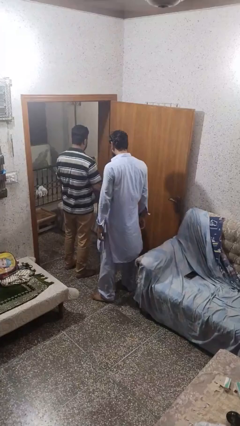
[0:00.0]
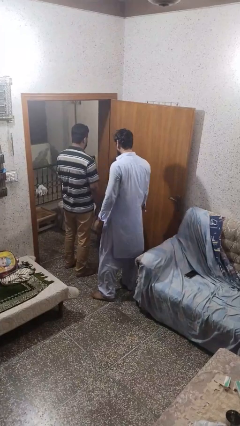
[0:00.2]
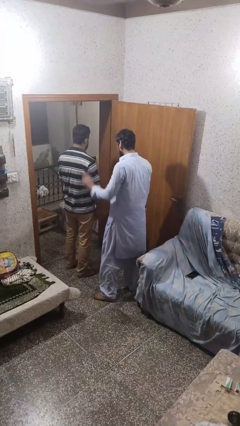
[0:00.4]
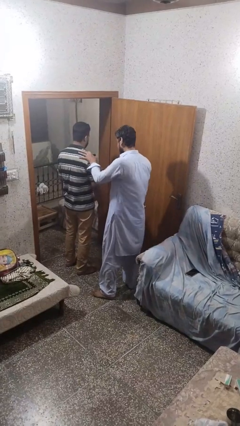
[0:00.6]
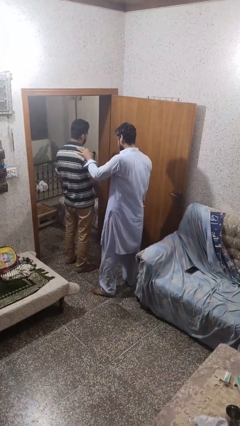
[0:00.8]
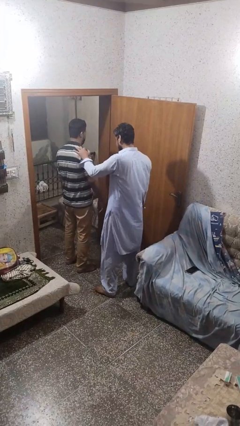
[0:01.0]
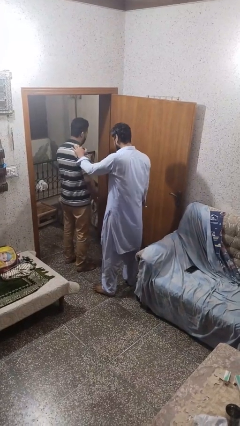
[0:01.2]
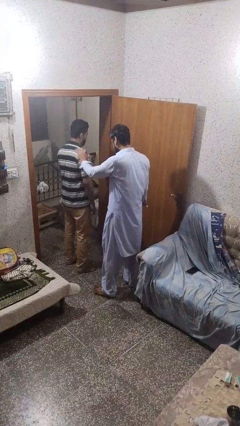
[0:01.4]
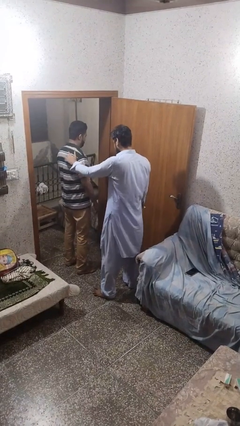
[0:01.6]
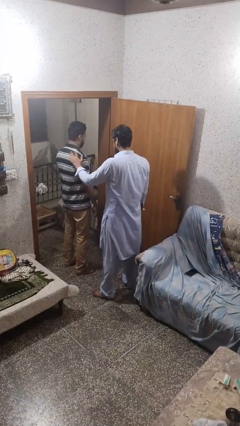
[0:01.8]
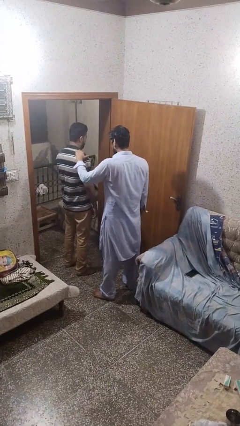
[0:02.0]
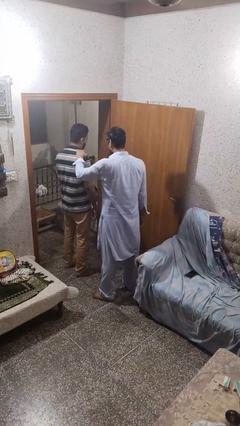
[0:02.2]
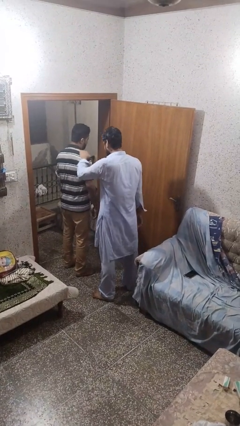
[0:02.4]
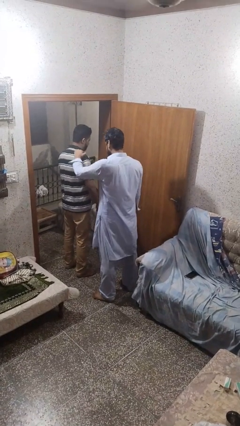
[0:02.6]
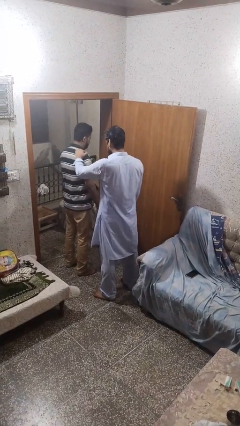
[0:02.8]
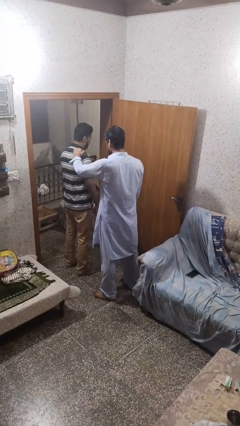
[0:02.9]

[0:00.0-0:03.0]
person grabs person by shoulder

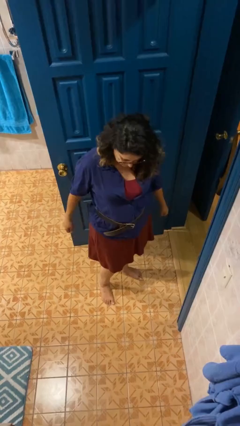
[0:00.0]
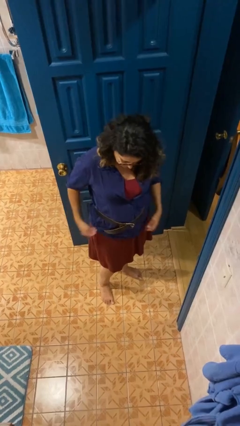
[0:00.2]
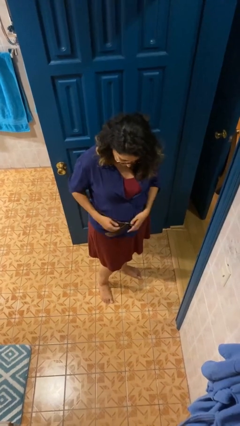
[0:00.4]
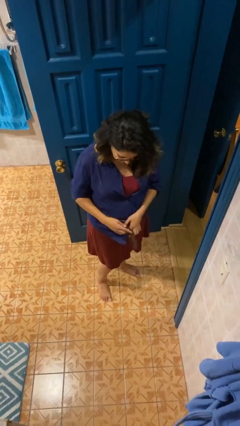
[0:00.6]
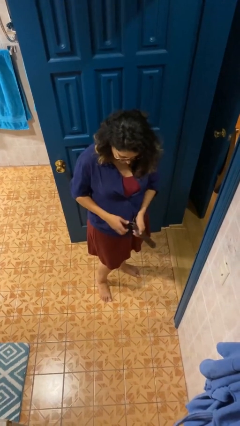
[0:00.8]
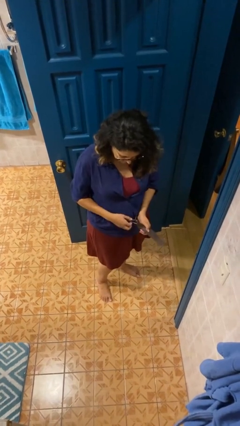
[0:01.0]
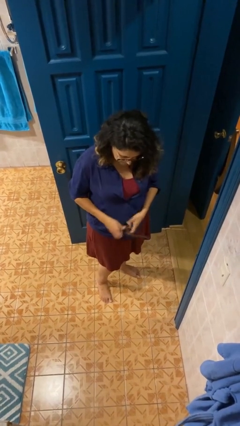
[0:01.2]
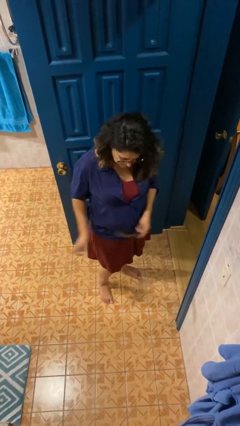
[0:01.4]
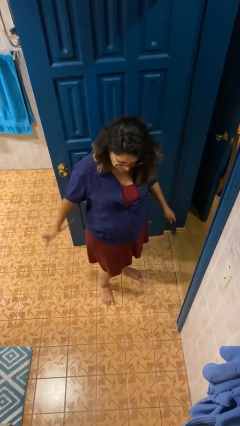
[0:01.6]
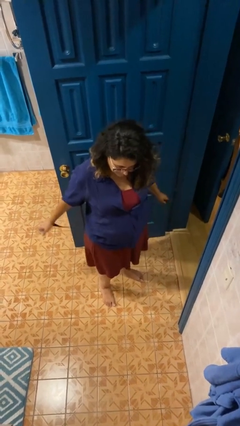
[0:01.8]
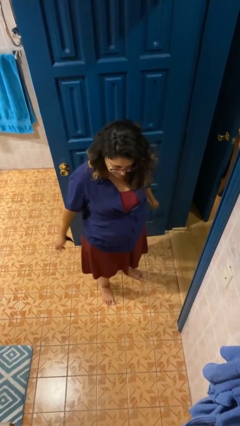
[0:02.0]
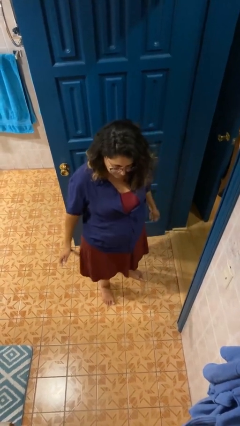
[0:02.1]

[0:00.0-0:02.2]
person takes off belt

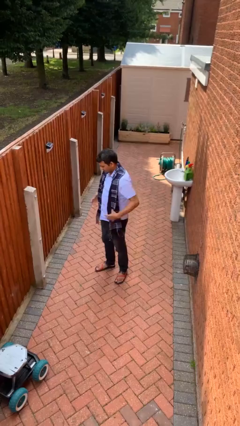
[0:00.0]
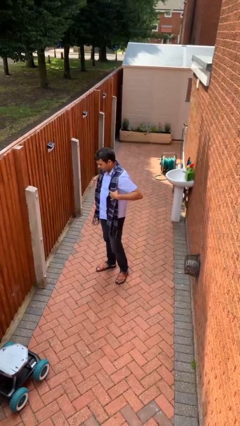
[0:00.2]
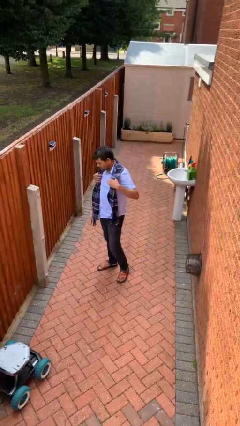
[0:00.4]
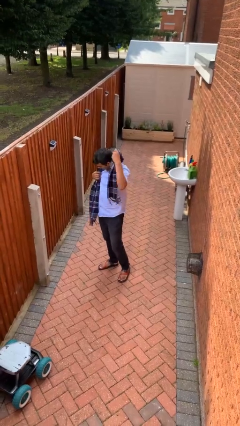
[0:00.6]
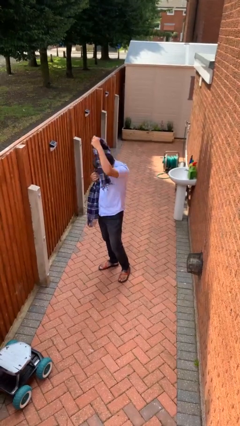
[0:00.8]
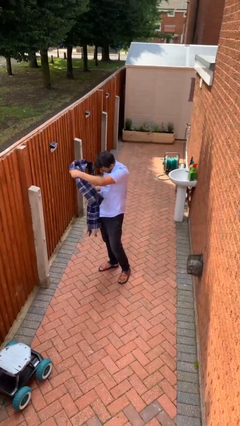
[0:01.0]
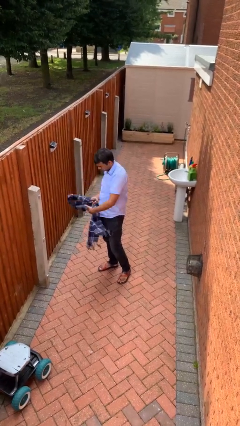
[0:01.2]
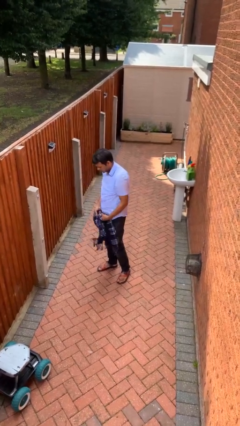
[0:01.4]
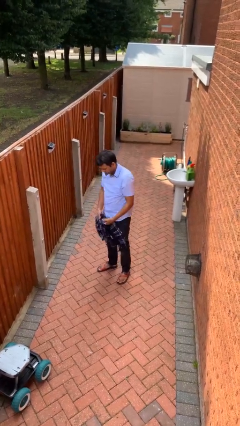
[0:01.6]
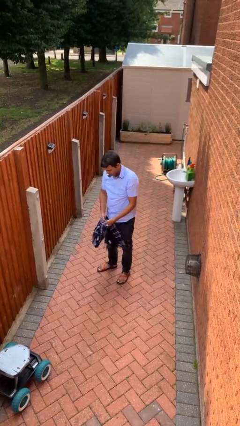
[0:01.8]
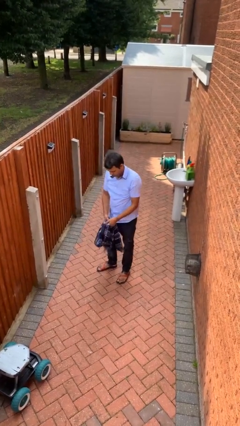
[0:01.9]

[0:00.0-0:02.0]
person takes off scarf

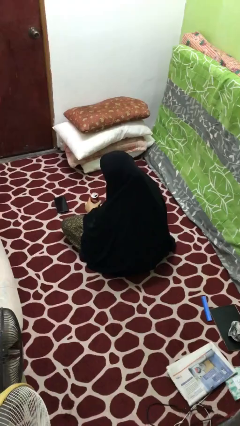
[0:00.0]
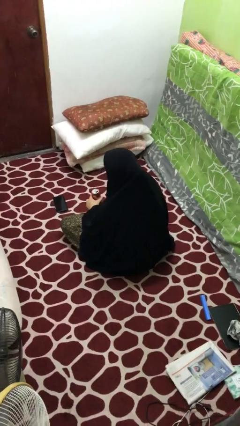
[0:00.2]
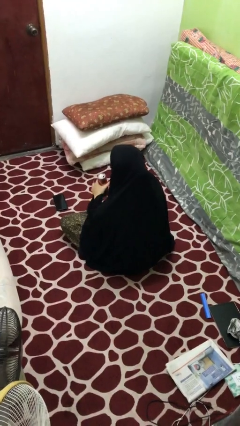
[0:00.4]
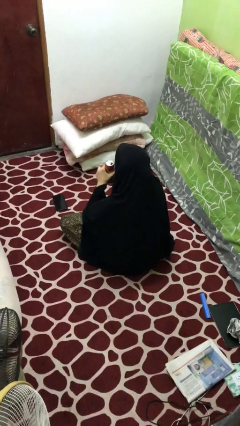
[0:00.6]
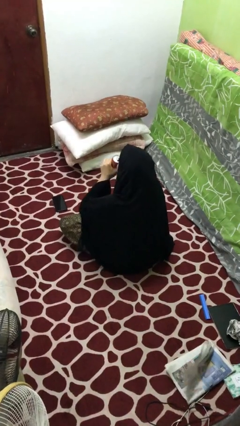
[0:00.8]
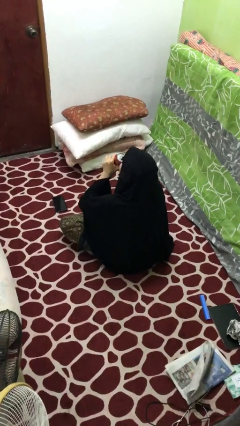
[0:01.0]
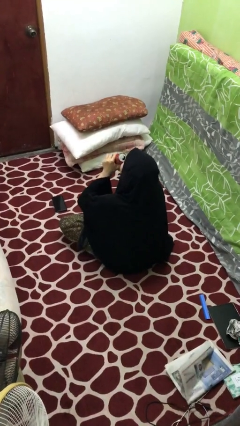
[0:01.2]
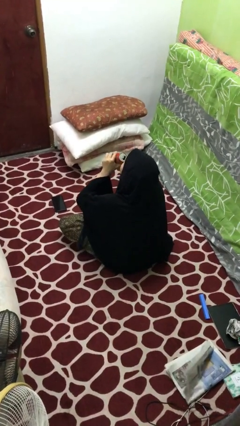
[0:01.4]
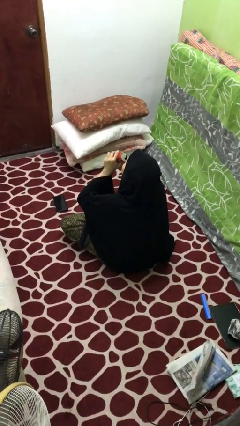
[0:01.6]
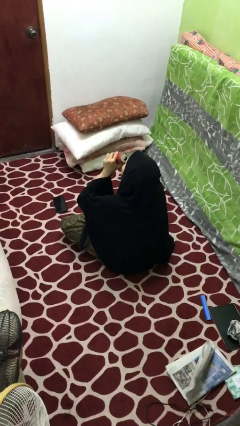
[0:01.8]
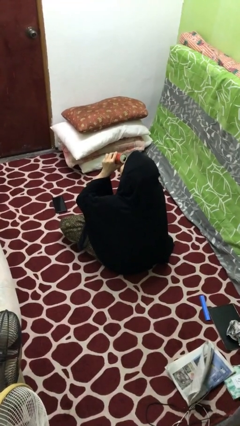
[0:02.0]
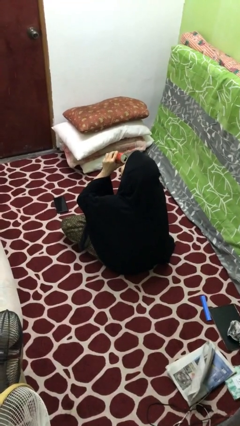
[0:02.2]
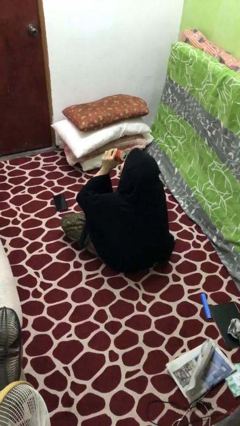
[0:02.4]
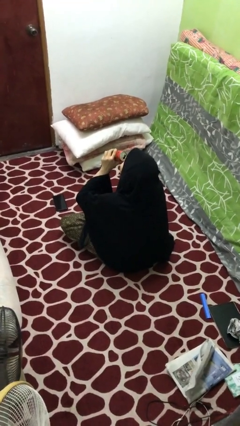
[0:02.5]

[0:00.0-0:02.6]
person drinks from beverage can

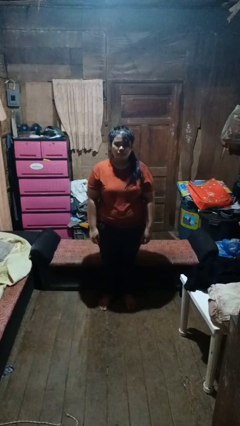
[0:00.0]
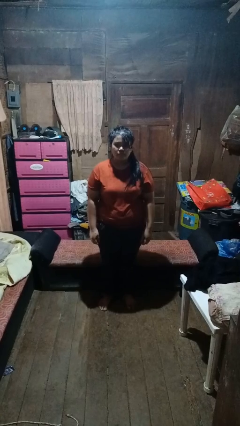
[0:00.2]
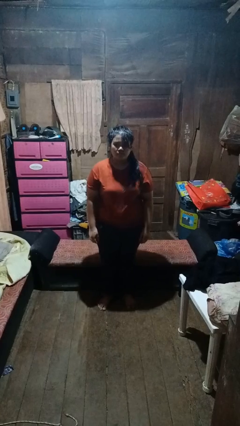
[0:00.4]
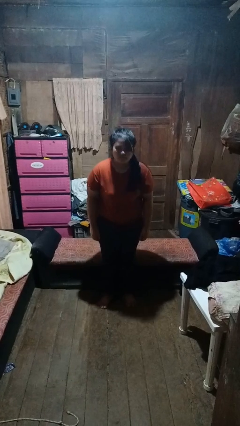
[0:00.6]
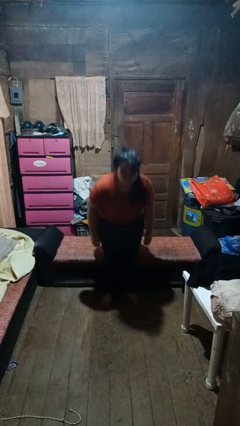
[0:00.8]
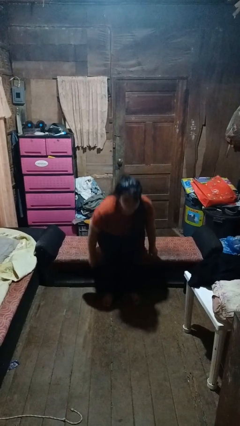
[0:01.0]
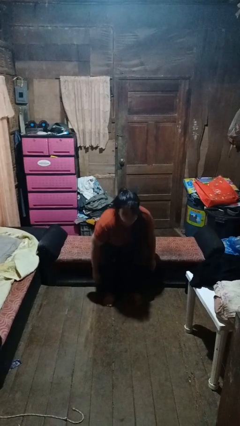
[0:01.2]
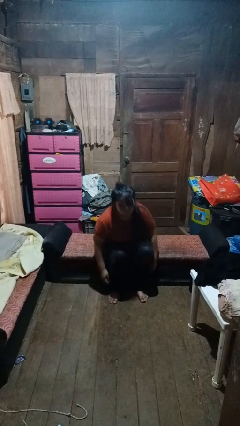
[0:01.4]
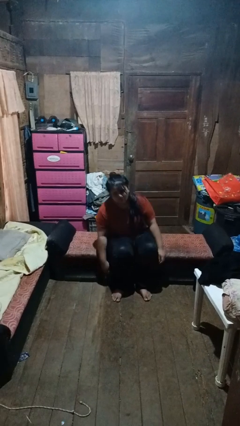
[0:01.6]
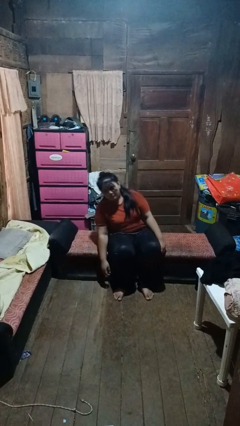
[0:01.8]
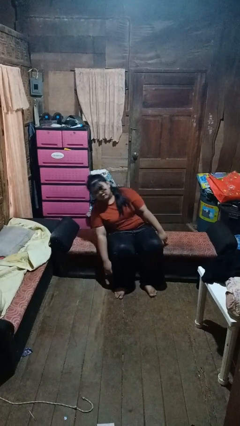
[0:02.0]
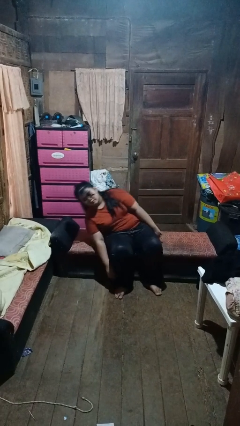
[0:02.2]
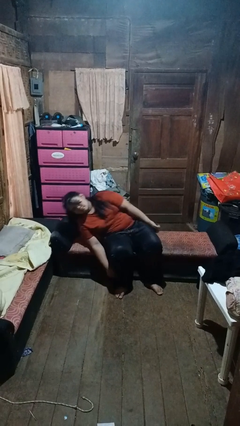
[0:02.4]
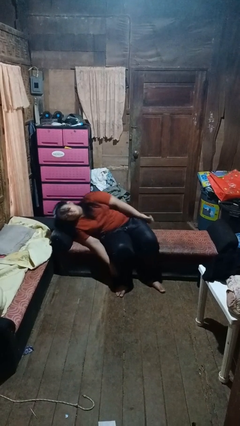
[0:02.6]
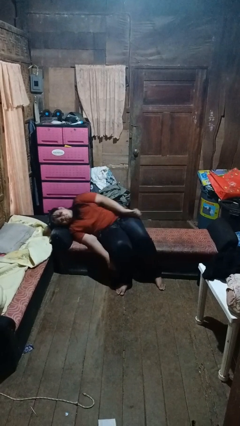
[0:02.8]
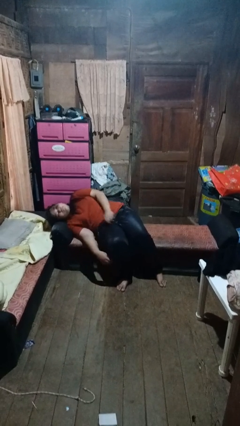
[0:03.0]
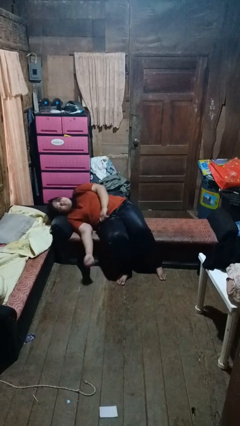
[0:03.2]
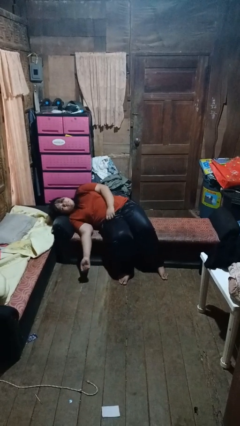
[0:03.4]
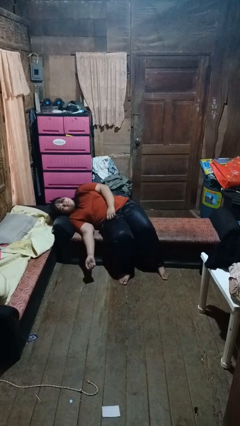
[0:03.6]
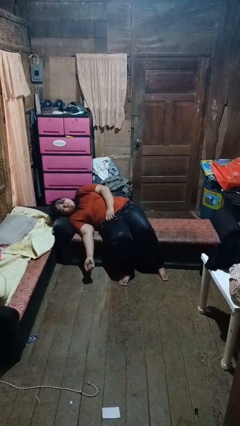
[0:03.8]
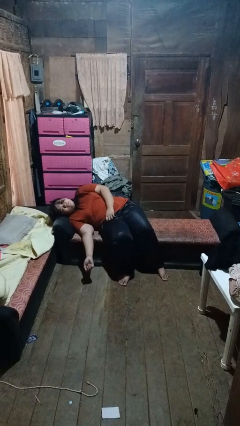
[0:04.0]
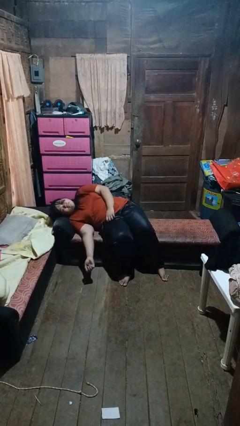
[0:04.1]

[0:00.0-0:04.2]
person lies down on couch

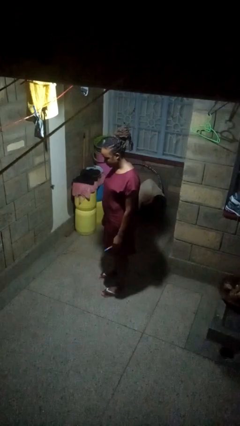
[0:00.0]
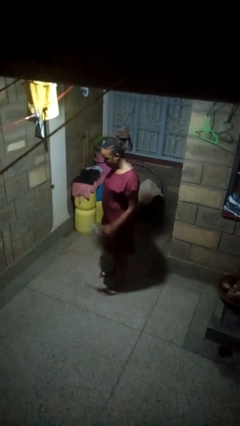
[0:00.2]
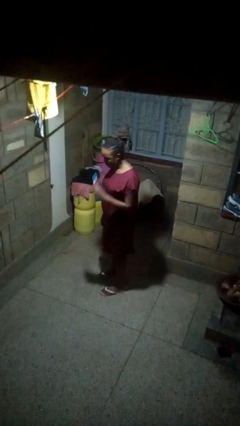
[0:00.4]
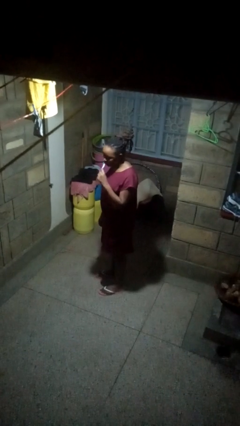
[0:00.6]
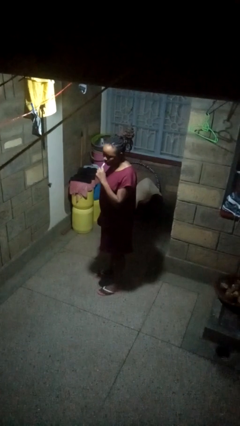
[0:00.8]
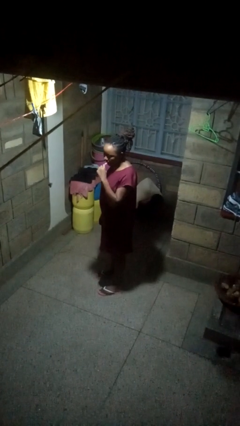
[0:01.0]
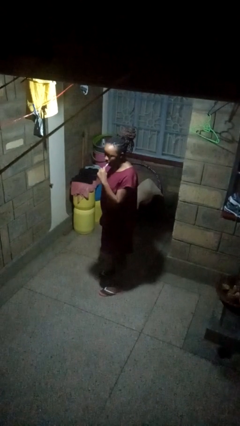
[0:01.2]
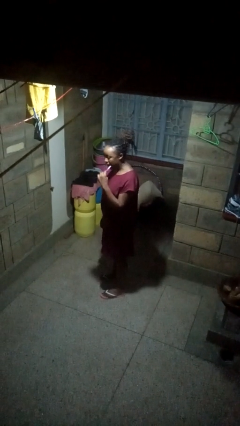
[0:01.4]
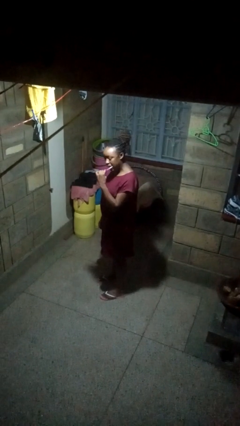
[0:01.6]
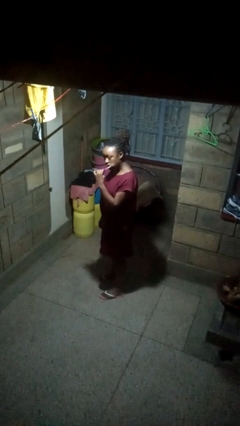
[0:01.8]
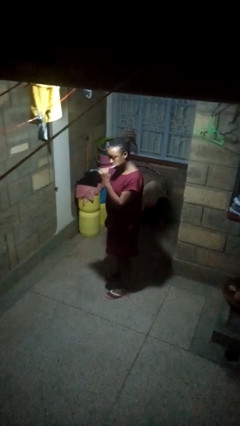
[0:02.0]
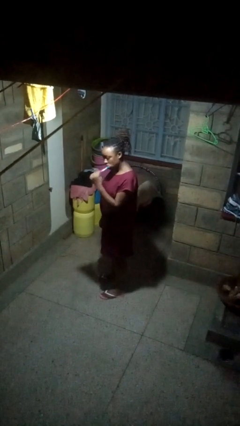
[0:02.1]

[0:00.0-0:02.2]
person brushes teeth

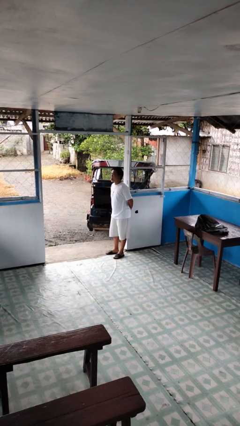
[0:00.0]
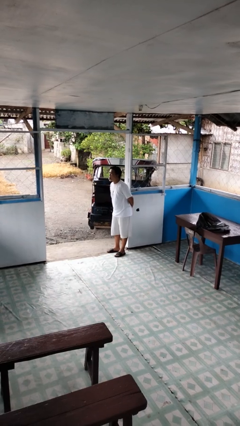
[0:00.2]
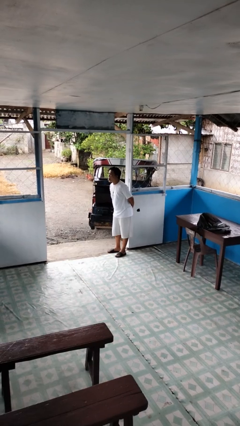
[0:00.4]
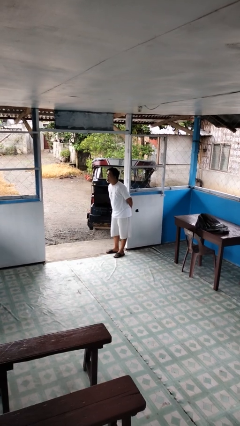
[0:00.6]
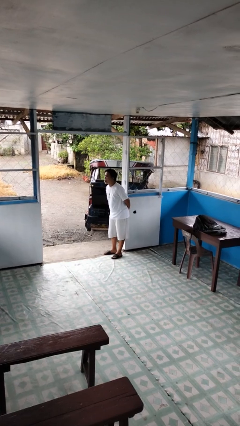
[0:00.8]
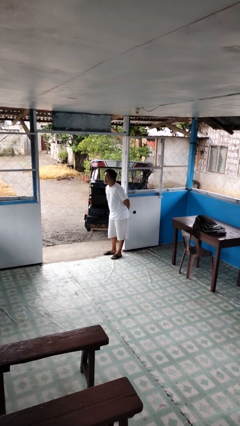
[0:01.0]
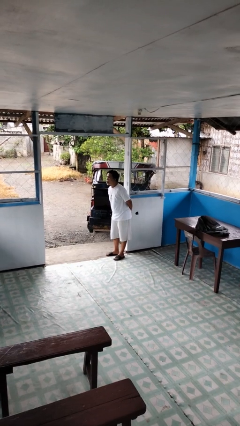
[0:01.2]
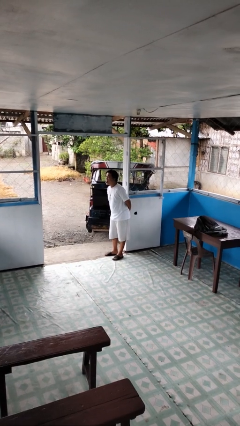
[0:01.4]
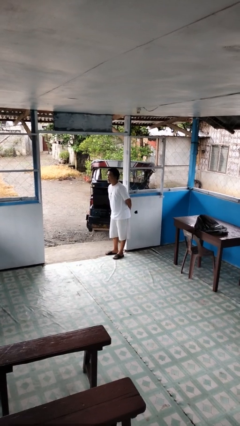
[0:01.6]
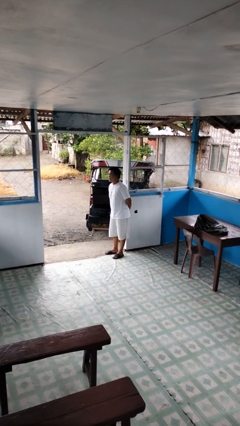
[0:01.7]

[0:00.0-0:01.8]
person sticks out tongue
